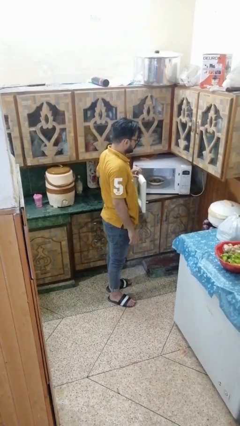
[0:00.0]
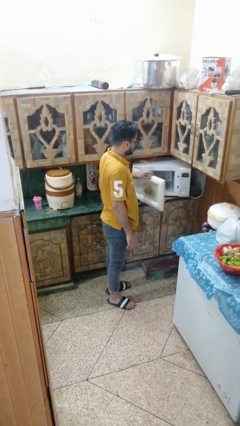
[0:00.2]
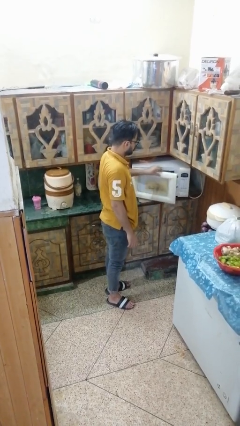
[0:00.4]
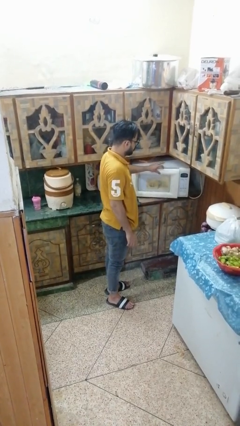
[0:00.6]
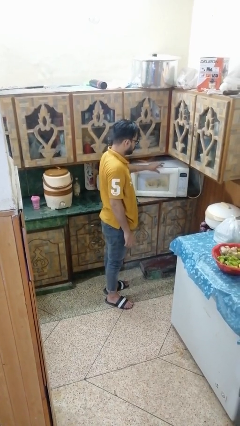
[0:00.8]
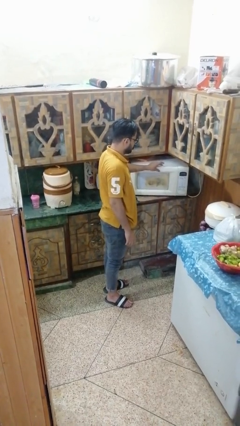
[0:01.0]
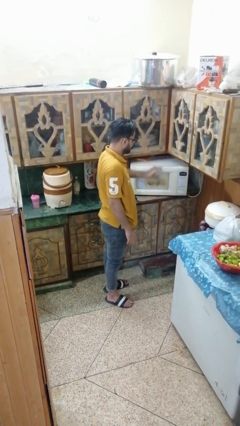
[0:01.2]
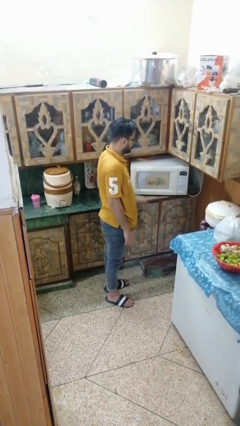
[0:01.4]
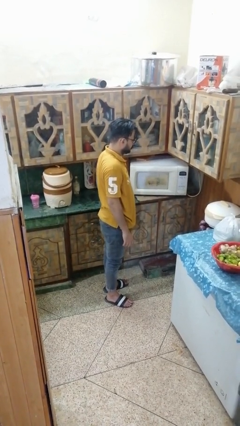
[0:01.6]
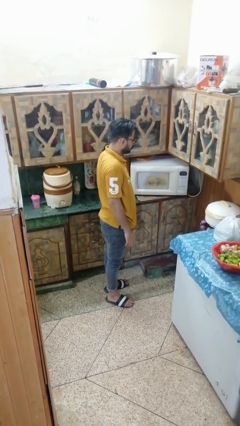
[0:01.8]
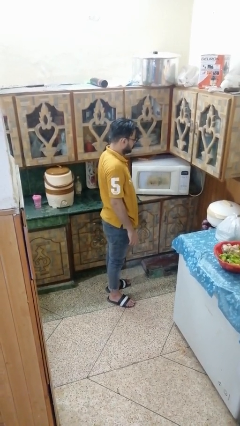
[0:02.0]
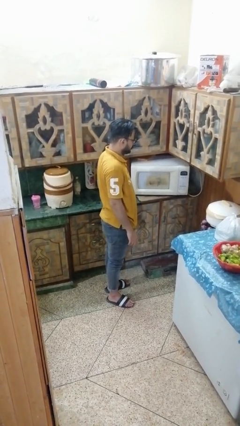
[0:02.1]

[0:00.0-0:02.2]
person closes microwave

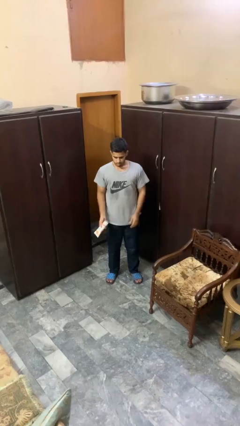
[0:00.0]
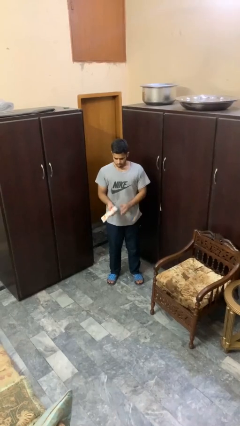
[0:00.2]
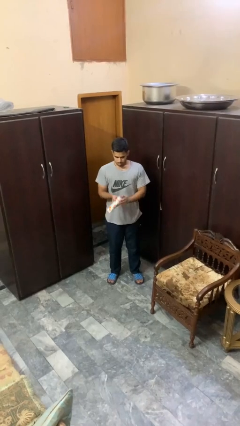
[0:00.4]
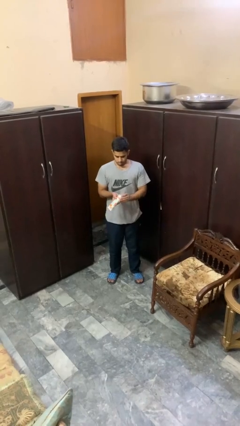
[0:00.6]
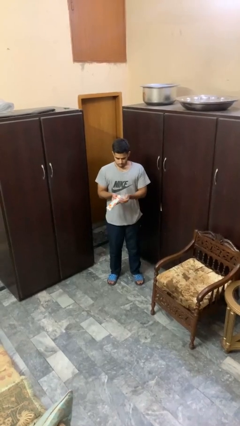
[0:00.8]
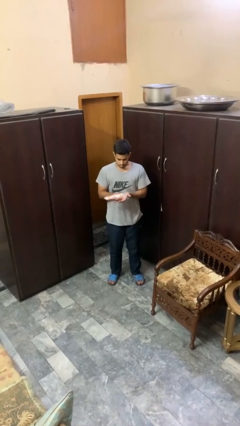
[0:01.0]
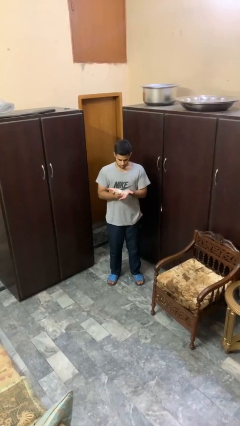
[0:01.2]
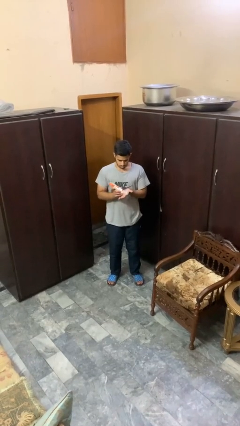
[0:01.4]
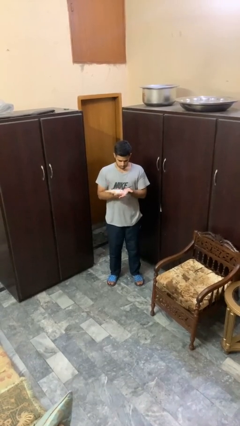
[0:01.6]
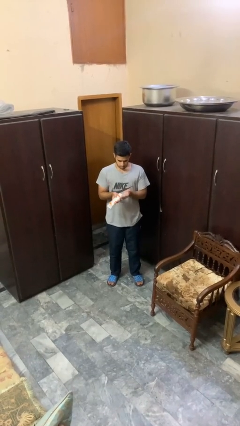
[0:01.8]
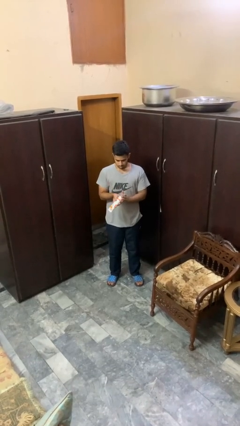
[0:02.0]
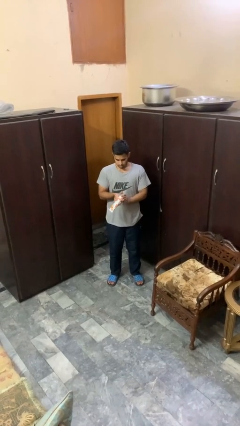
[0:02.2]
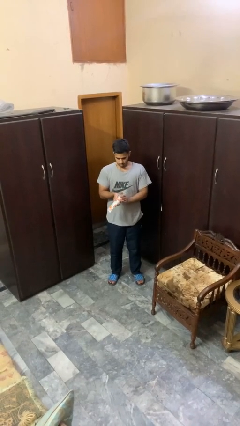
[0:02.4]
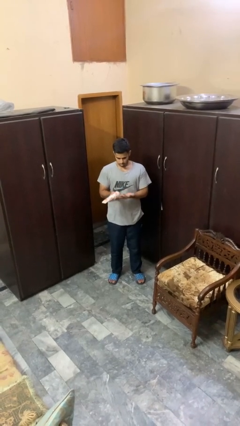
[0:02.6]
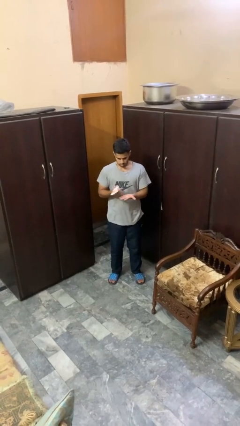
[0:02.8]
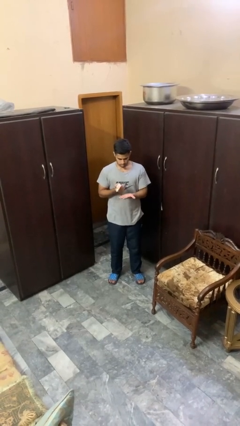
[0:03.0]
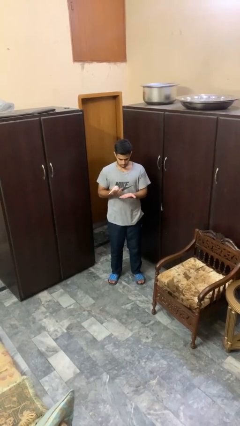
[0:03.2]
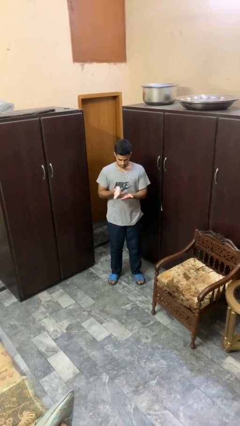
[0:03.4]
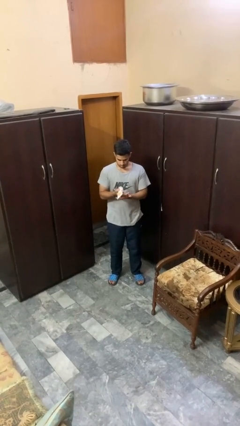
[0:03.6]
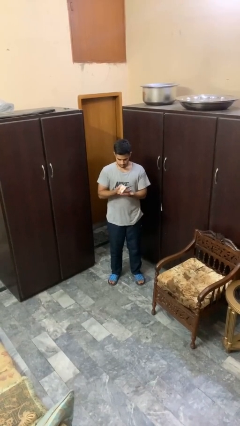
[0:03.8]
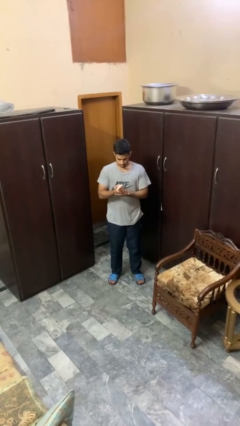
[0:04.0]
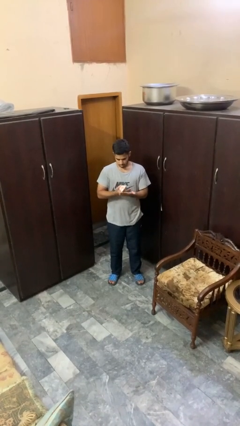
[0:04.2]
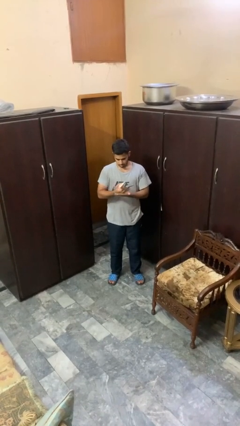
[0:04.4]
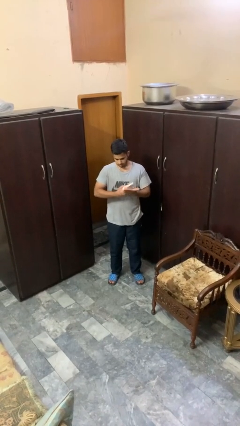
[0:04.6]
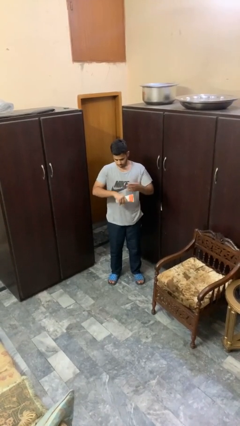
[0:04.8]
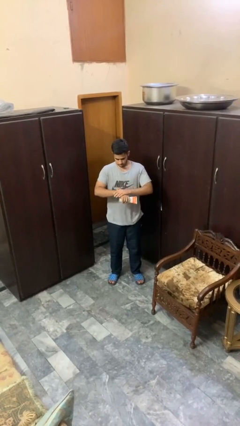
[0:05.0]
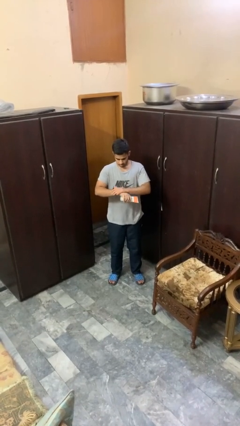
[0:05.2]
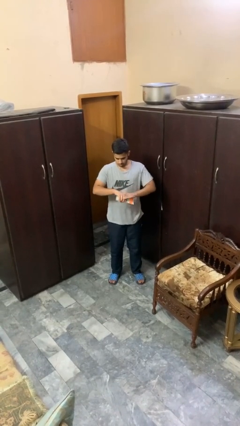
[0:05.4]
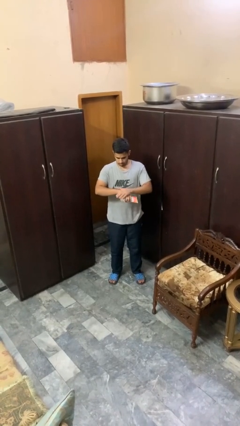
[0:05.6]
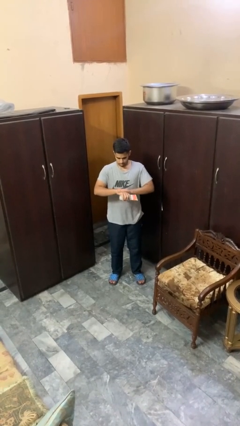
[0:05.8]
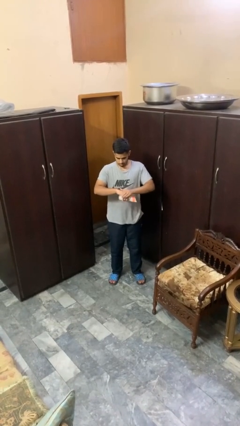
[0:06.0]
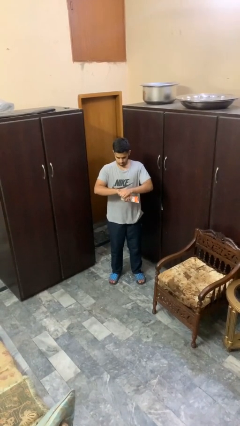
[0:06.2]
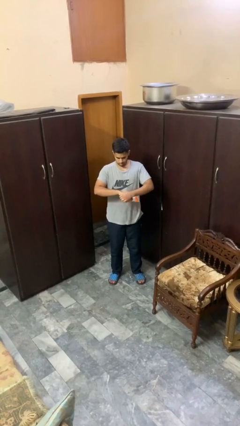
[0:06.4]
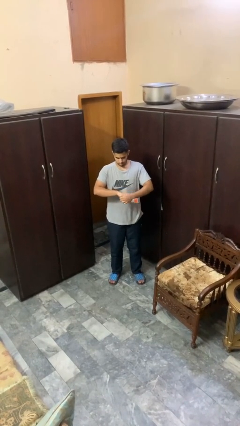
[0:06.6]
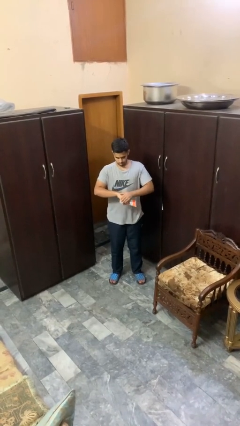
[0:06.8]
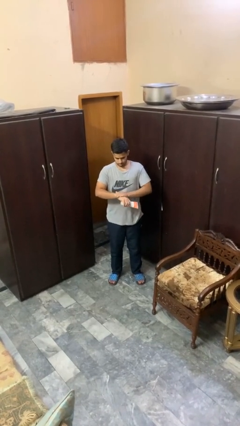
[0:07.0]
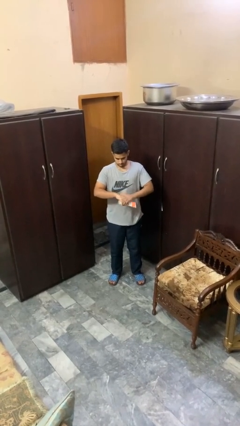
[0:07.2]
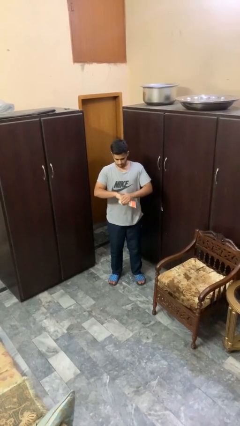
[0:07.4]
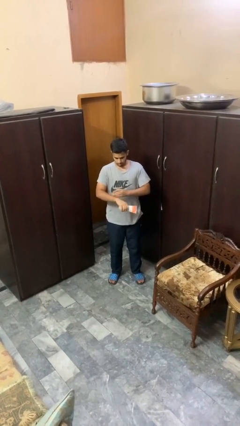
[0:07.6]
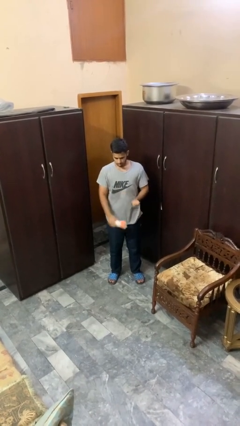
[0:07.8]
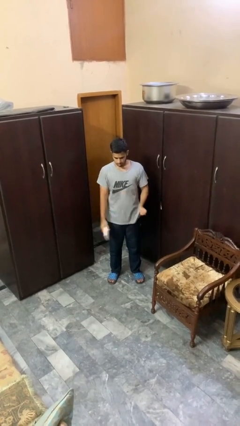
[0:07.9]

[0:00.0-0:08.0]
person applies sunscreen

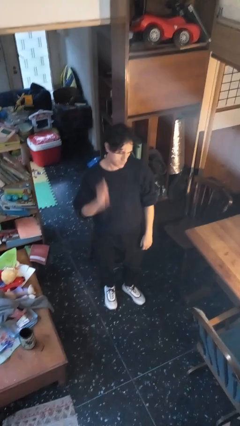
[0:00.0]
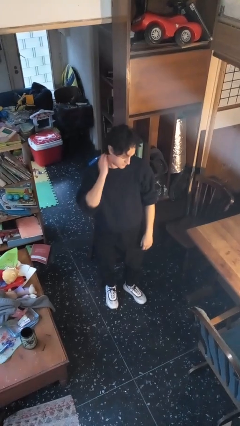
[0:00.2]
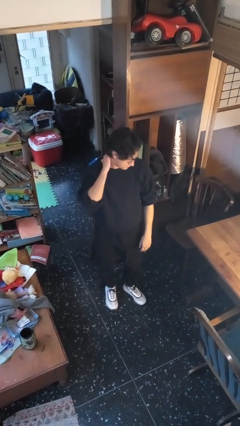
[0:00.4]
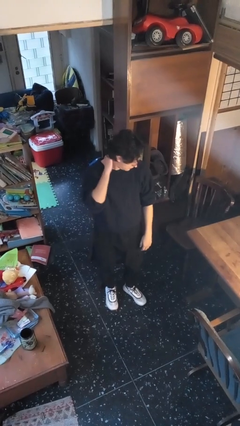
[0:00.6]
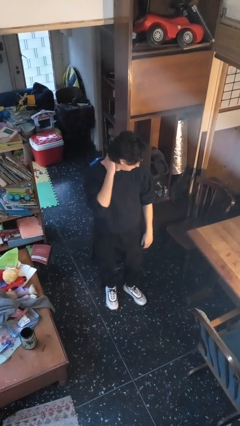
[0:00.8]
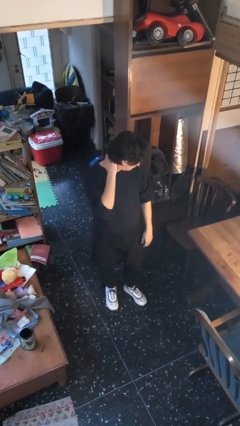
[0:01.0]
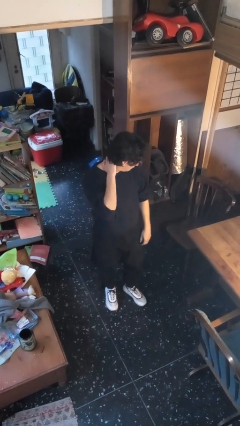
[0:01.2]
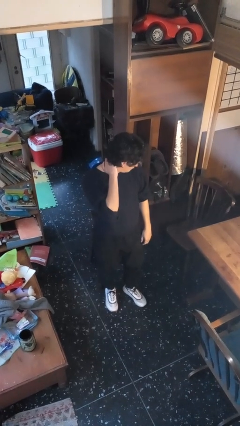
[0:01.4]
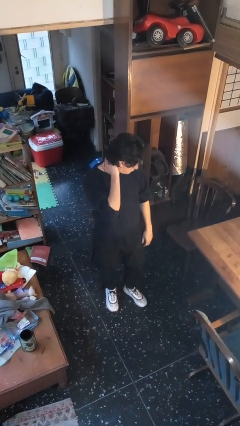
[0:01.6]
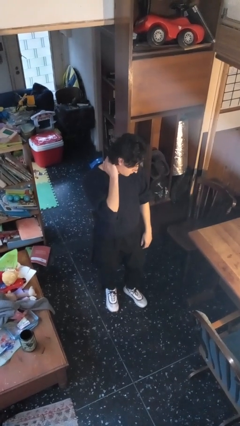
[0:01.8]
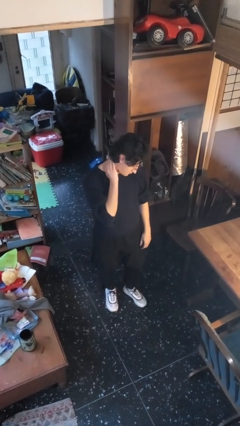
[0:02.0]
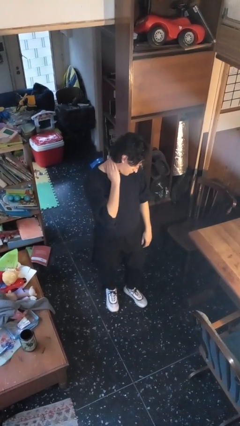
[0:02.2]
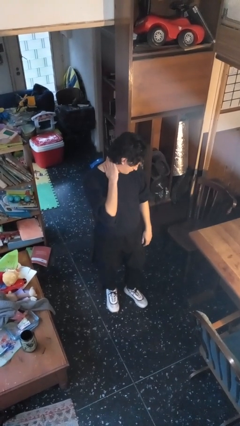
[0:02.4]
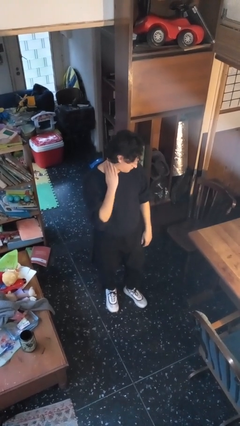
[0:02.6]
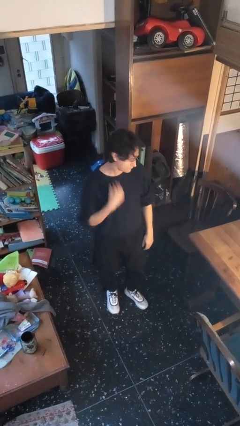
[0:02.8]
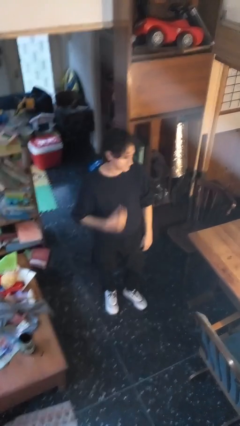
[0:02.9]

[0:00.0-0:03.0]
person rubs neck

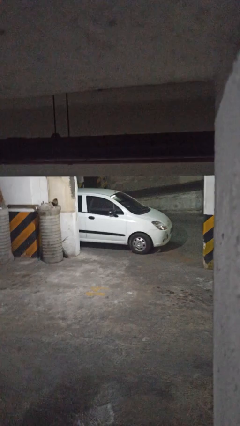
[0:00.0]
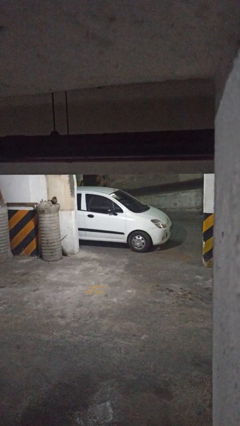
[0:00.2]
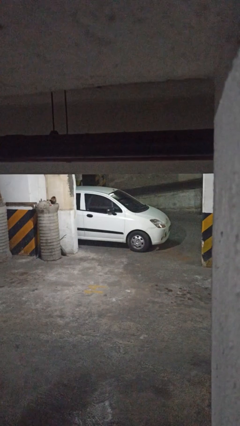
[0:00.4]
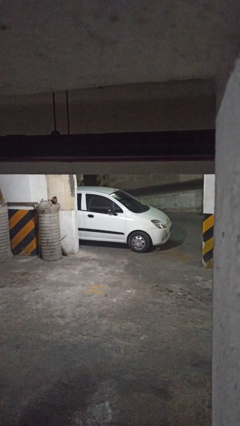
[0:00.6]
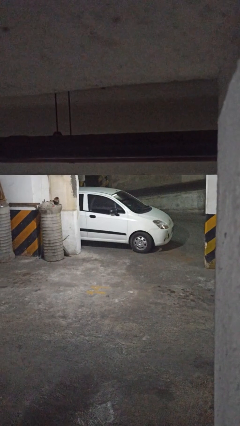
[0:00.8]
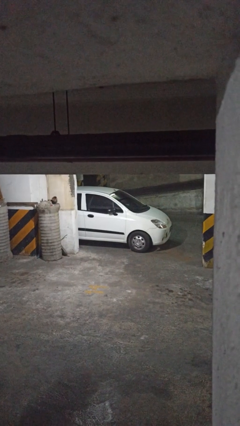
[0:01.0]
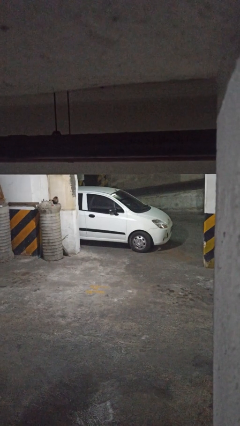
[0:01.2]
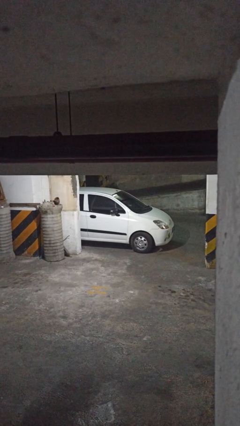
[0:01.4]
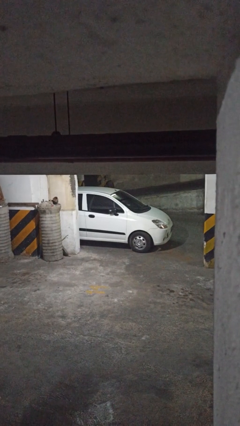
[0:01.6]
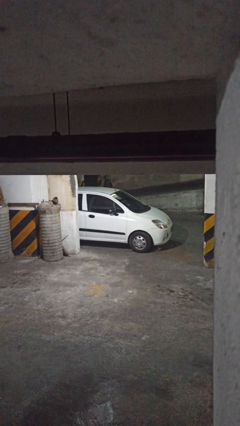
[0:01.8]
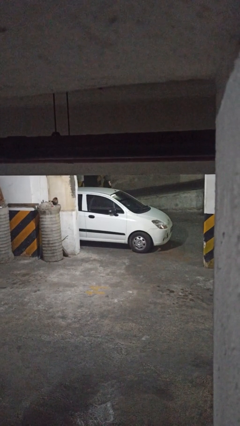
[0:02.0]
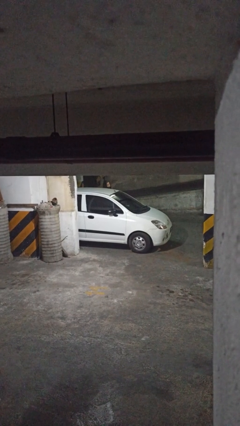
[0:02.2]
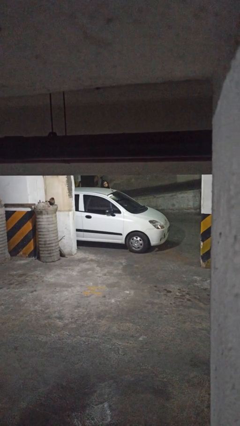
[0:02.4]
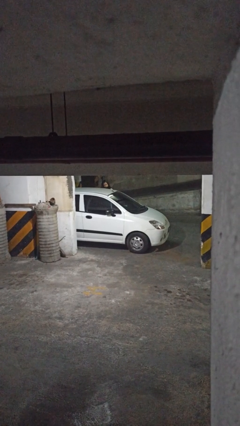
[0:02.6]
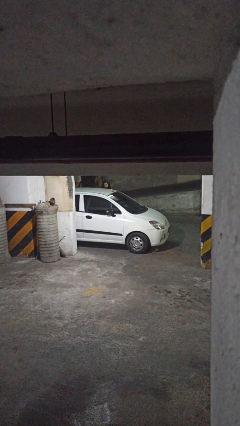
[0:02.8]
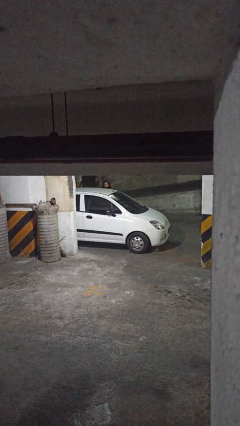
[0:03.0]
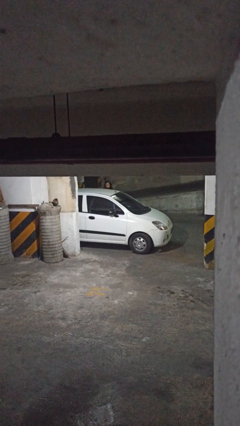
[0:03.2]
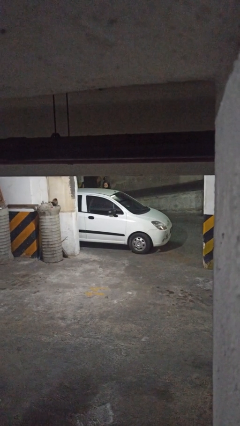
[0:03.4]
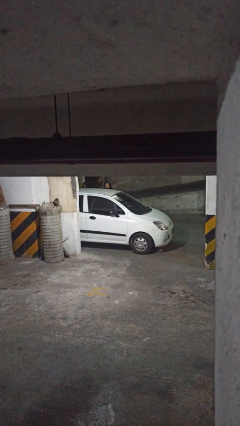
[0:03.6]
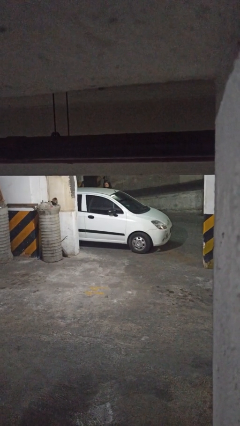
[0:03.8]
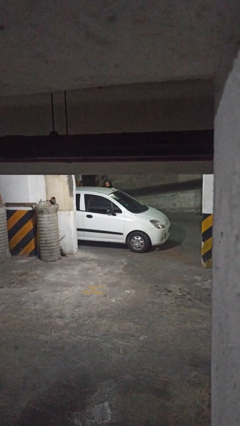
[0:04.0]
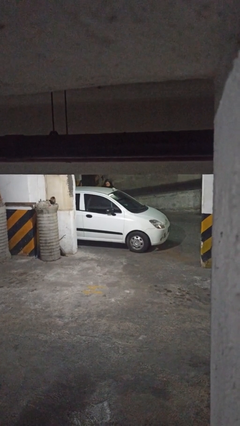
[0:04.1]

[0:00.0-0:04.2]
car drops off person

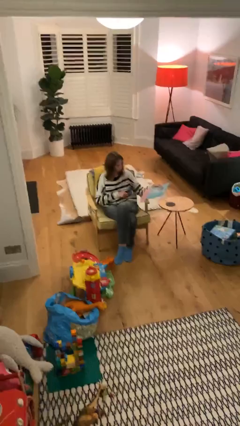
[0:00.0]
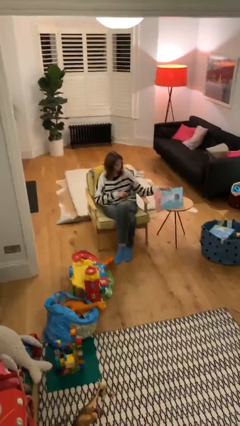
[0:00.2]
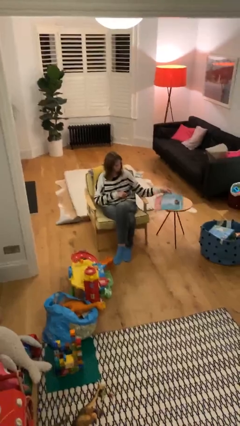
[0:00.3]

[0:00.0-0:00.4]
person puts down object on table
